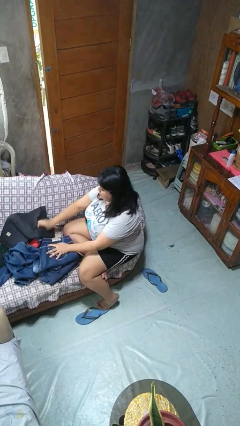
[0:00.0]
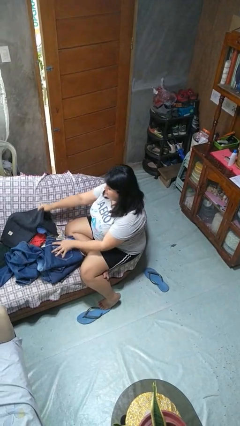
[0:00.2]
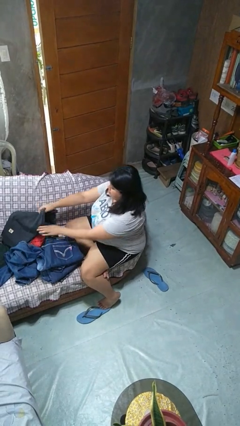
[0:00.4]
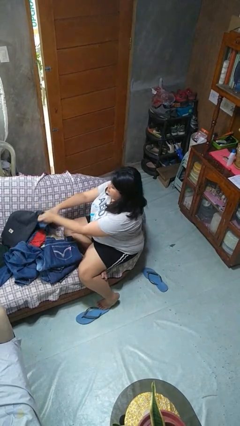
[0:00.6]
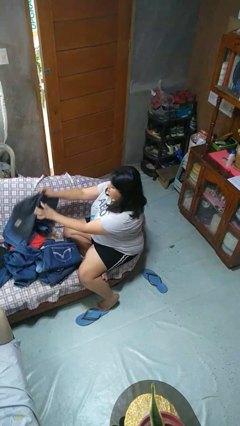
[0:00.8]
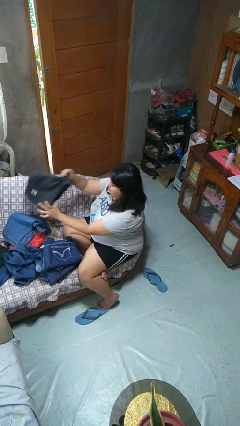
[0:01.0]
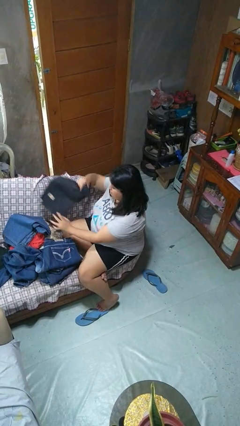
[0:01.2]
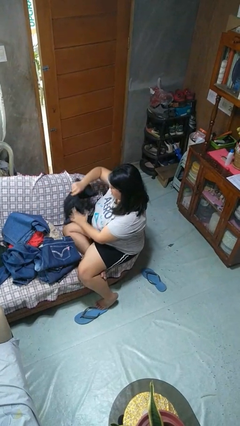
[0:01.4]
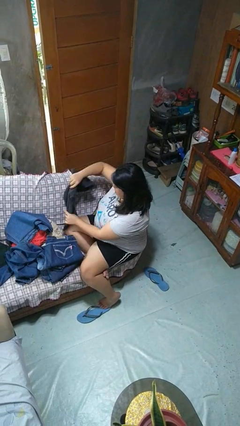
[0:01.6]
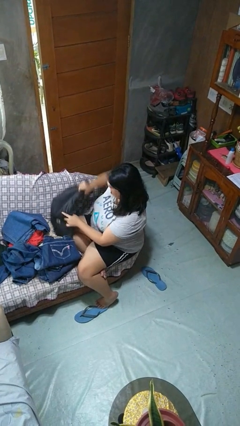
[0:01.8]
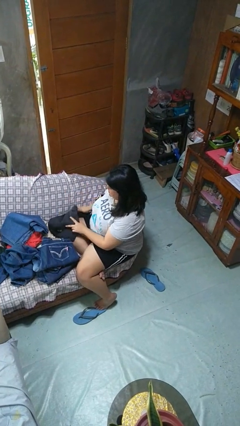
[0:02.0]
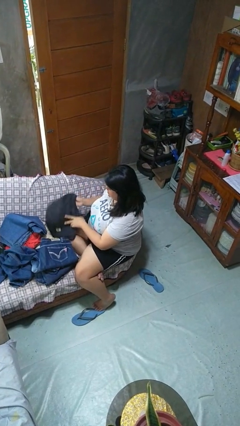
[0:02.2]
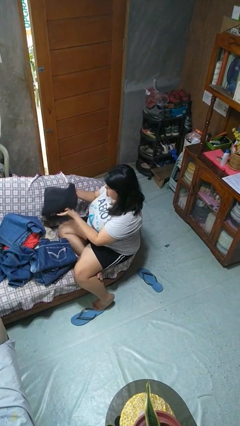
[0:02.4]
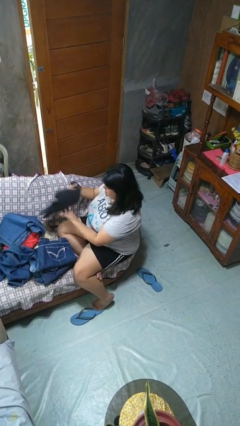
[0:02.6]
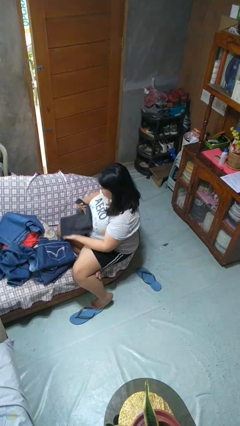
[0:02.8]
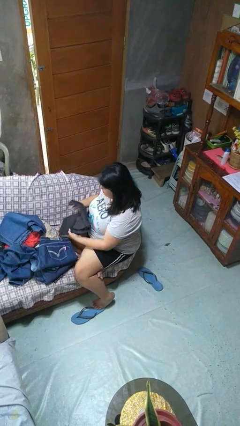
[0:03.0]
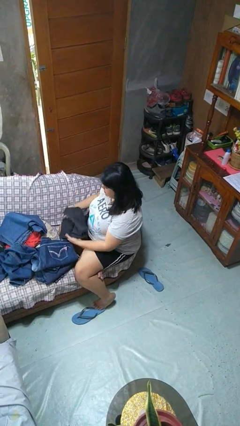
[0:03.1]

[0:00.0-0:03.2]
person folds pants

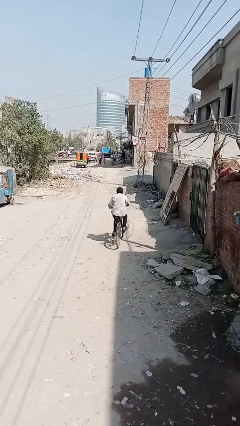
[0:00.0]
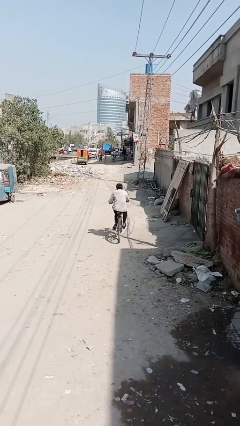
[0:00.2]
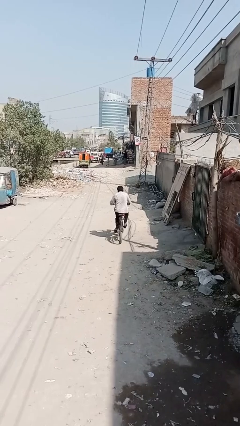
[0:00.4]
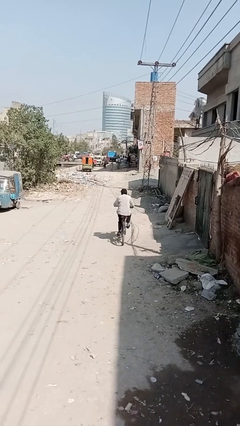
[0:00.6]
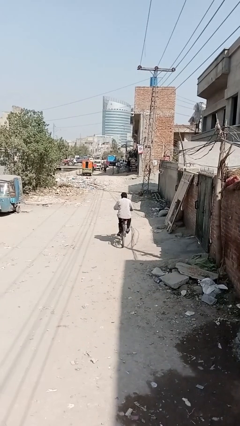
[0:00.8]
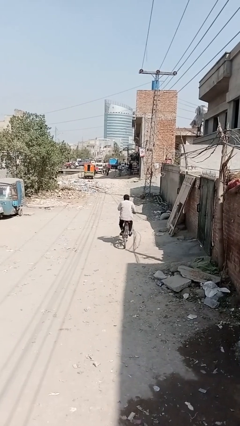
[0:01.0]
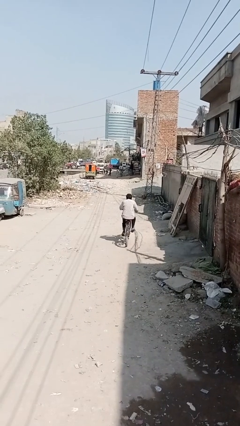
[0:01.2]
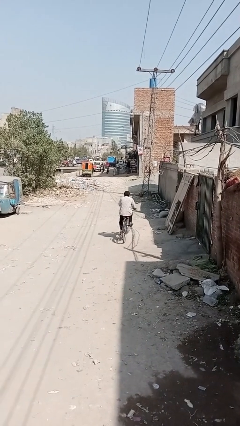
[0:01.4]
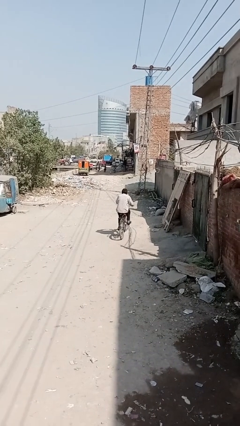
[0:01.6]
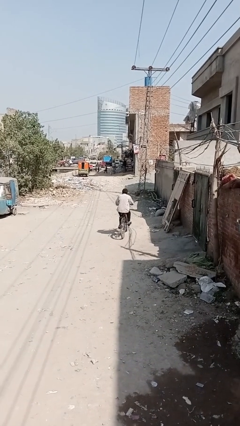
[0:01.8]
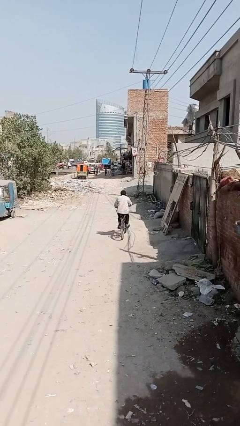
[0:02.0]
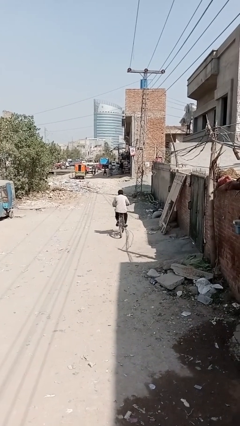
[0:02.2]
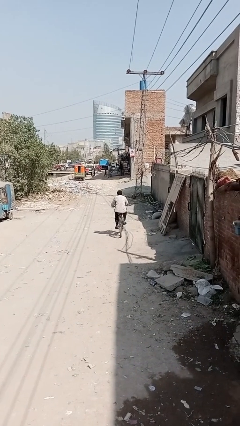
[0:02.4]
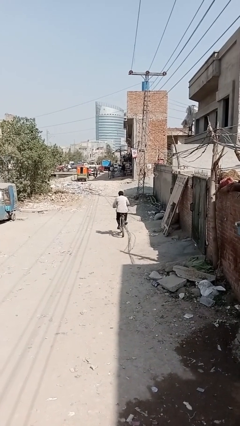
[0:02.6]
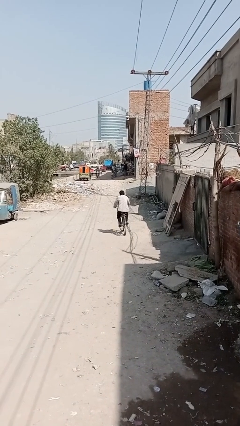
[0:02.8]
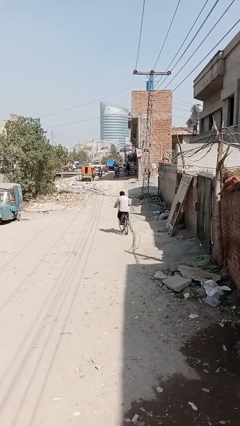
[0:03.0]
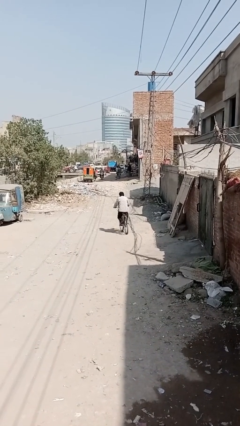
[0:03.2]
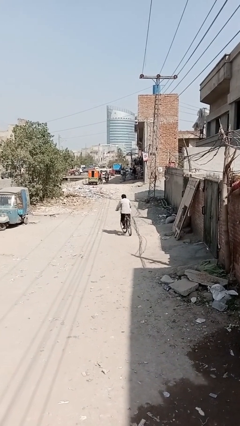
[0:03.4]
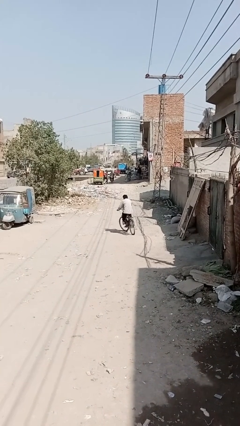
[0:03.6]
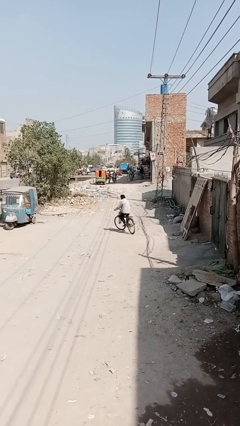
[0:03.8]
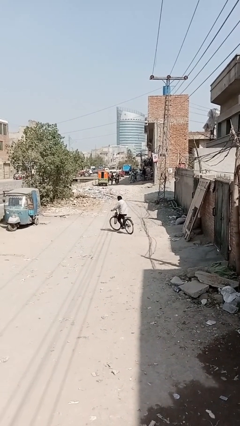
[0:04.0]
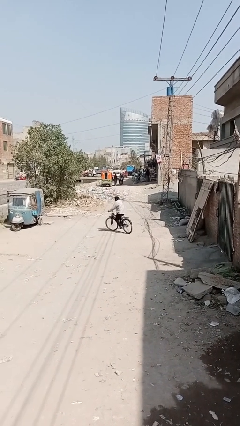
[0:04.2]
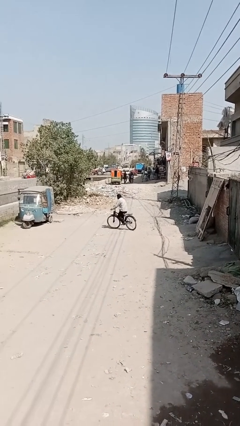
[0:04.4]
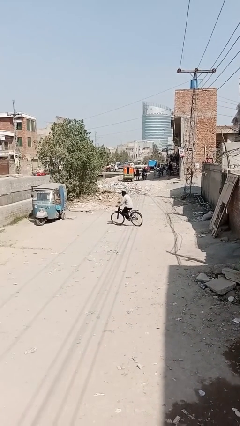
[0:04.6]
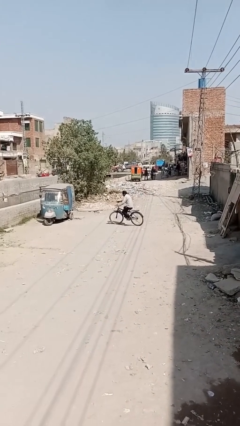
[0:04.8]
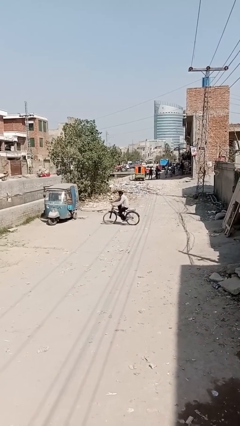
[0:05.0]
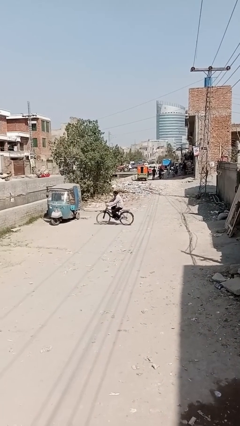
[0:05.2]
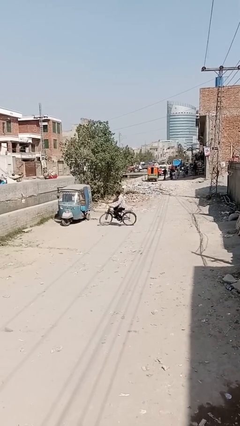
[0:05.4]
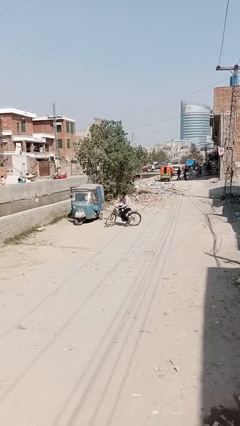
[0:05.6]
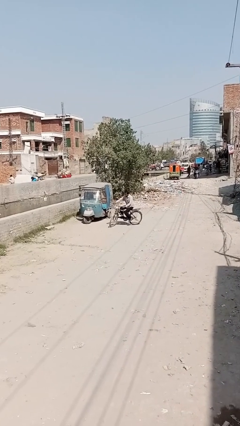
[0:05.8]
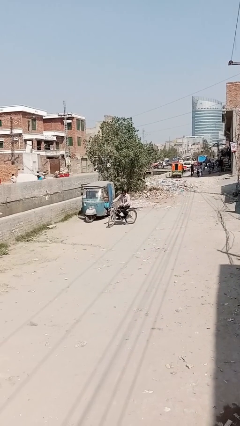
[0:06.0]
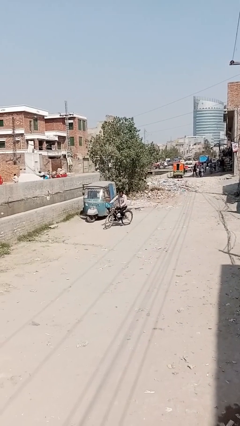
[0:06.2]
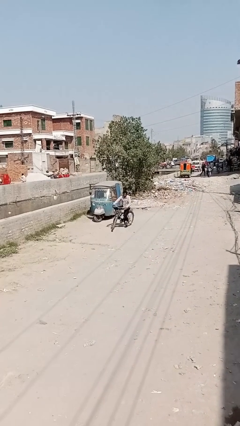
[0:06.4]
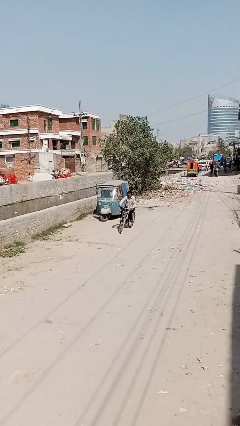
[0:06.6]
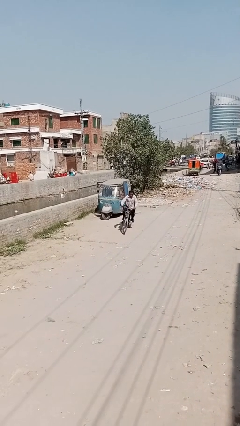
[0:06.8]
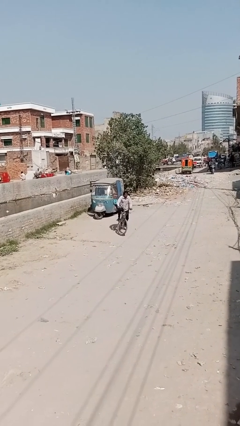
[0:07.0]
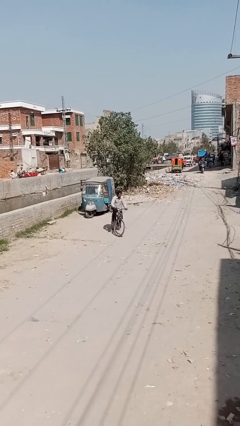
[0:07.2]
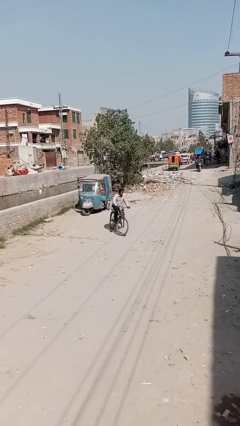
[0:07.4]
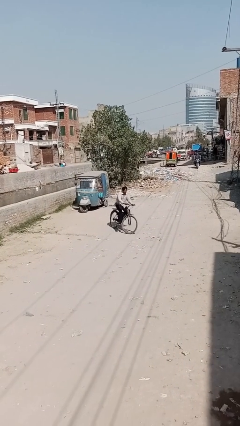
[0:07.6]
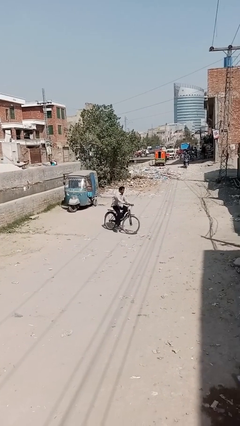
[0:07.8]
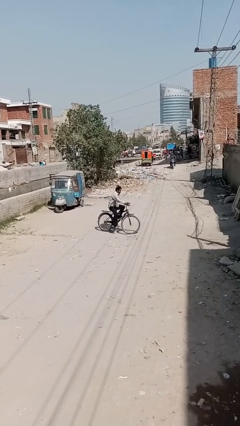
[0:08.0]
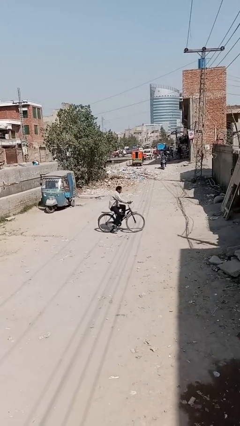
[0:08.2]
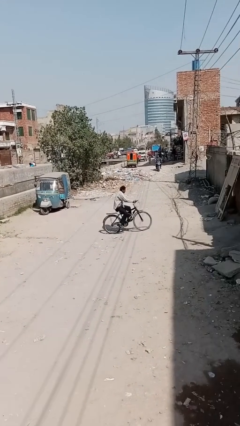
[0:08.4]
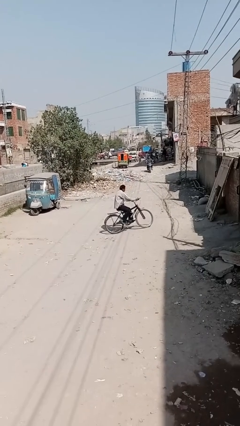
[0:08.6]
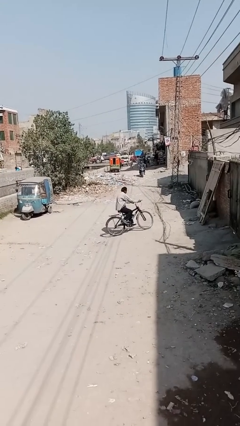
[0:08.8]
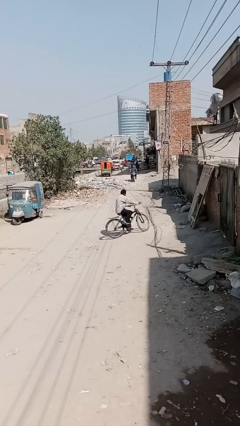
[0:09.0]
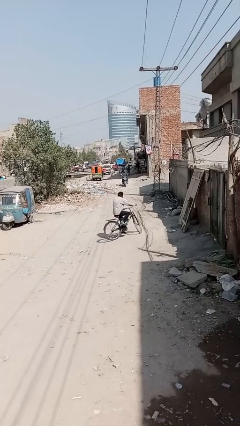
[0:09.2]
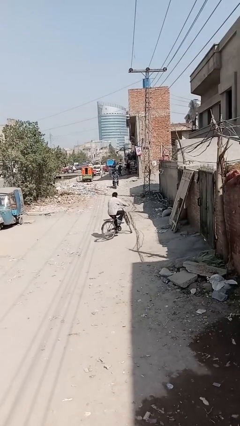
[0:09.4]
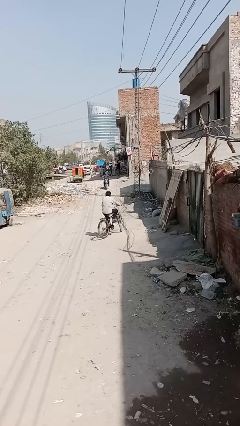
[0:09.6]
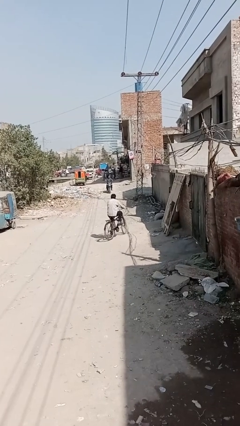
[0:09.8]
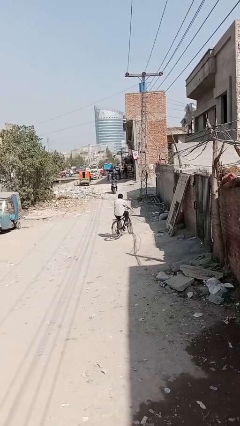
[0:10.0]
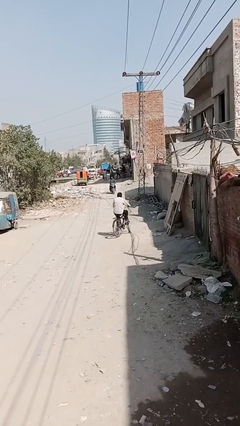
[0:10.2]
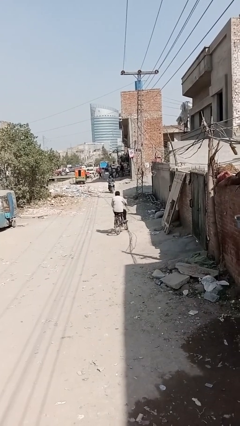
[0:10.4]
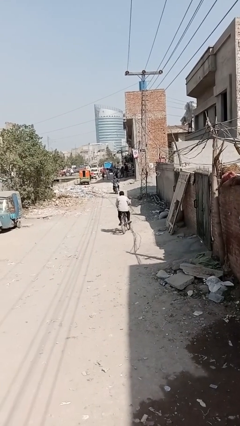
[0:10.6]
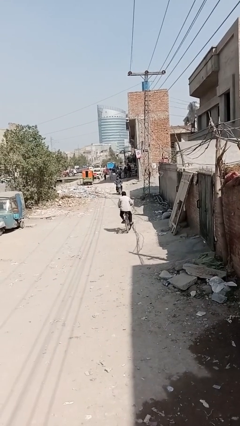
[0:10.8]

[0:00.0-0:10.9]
person rides bicycle

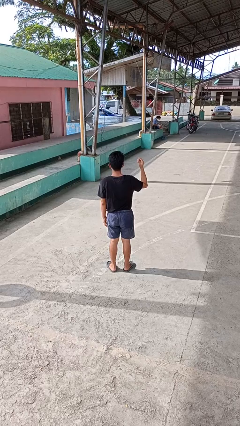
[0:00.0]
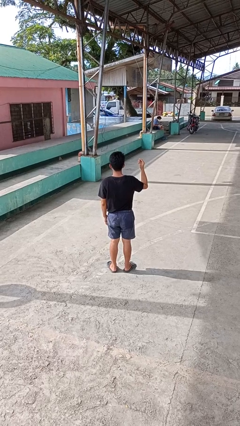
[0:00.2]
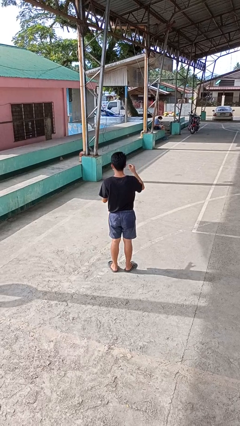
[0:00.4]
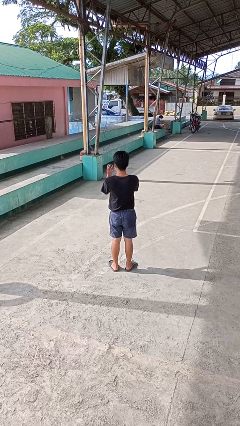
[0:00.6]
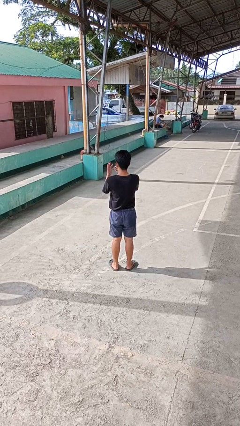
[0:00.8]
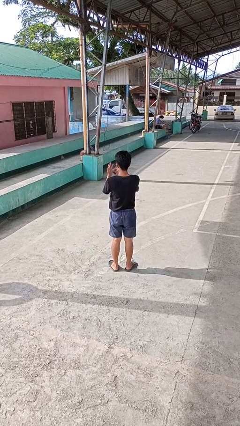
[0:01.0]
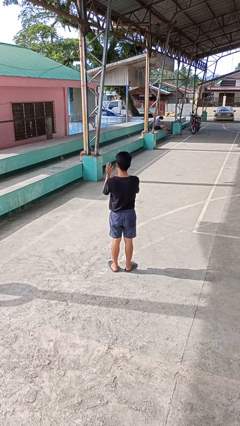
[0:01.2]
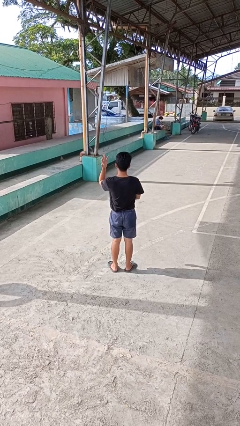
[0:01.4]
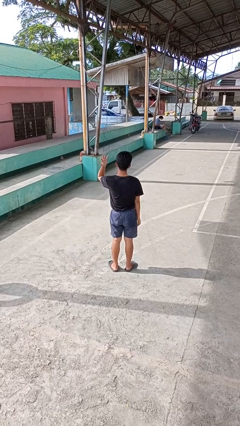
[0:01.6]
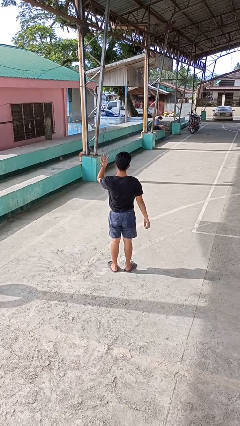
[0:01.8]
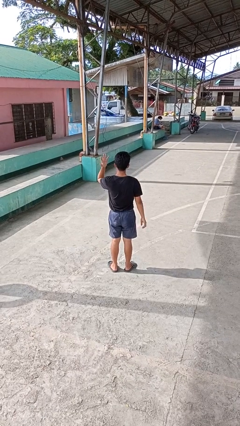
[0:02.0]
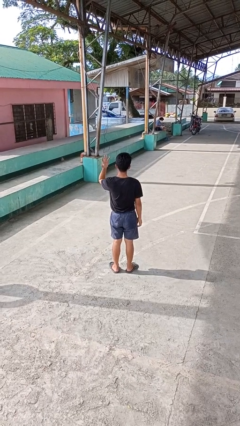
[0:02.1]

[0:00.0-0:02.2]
person puts on ring

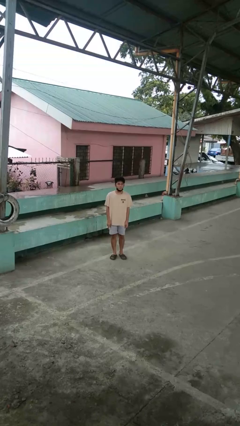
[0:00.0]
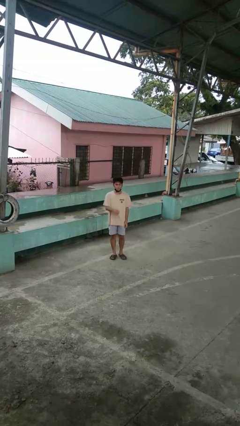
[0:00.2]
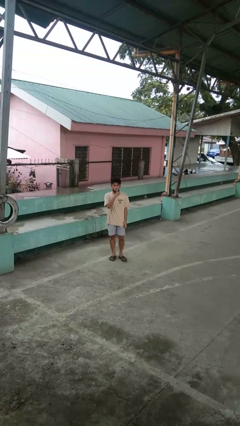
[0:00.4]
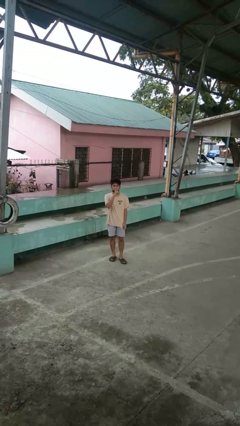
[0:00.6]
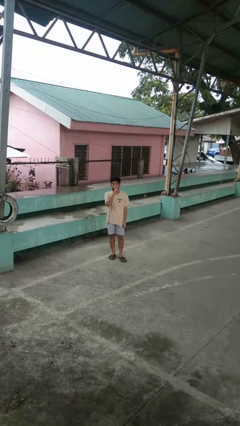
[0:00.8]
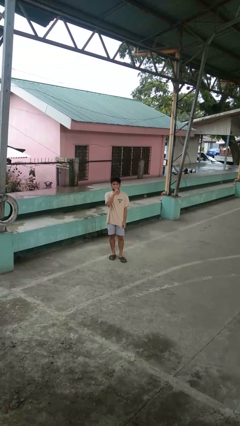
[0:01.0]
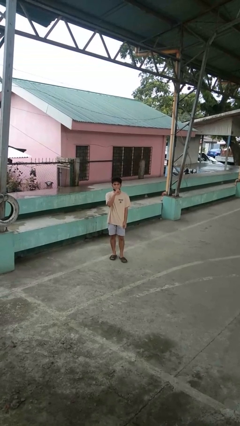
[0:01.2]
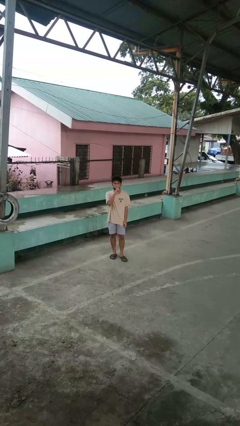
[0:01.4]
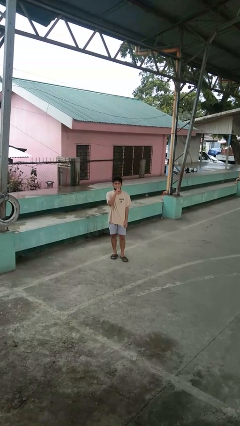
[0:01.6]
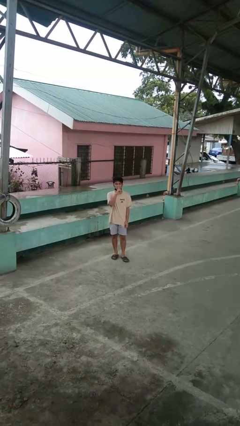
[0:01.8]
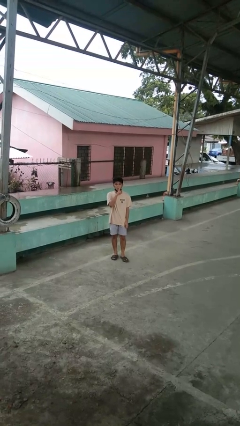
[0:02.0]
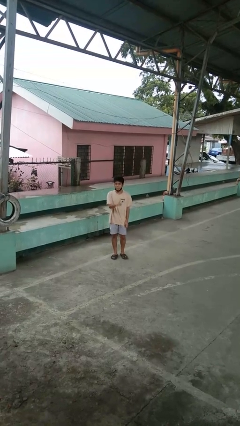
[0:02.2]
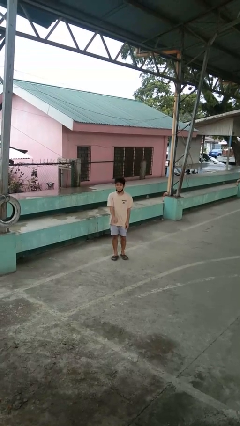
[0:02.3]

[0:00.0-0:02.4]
person gestures be quiet
